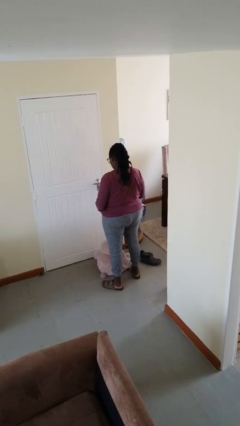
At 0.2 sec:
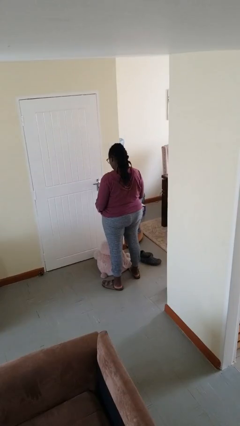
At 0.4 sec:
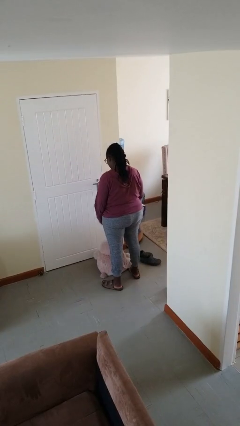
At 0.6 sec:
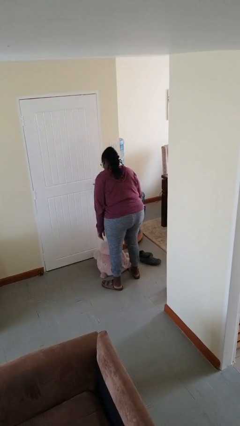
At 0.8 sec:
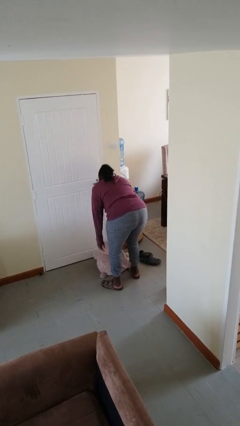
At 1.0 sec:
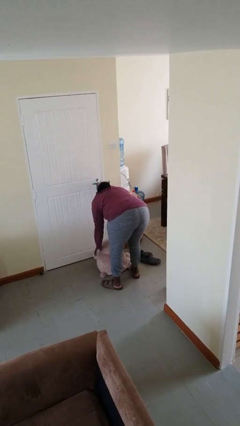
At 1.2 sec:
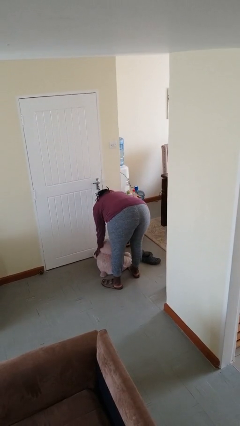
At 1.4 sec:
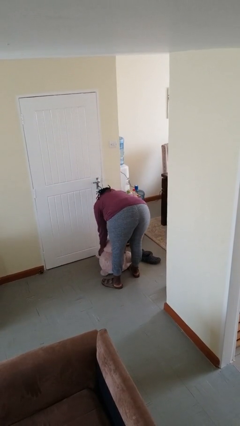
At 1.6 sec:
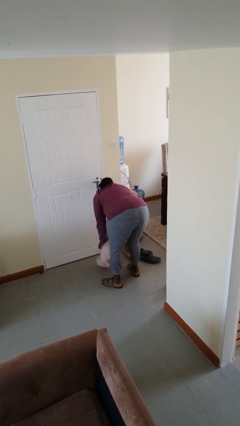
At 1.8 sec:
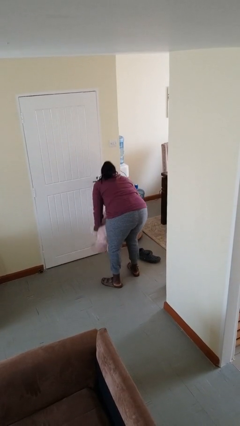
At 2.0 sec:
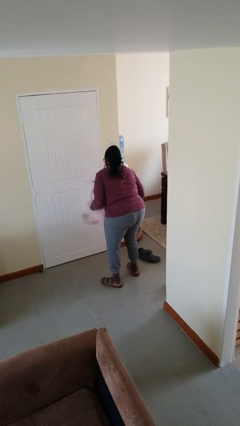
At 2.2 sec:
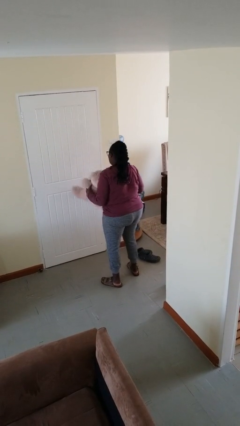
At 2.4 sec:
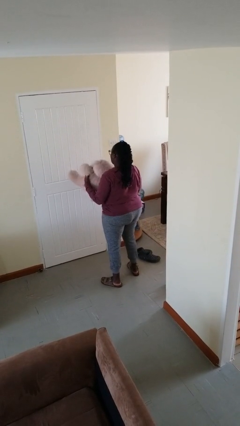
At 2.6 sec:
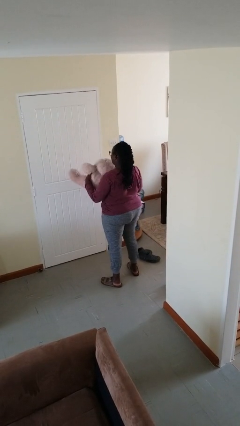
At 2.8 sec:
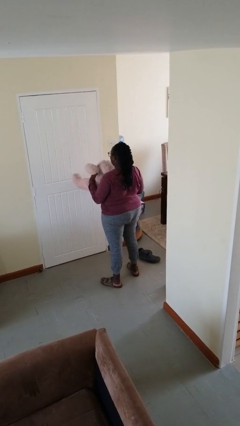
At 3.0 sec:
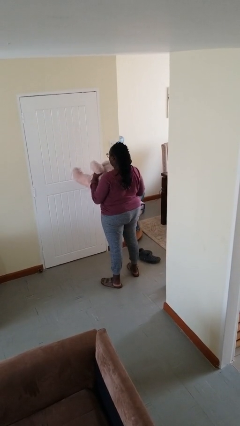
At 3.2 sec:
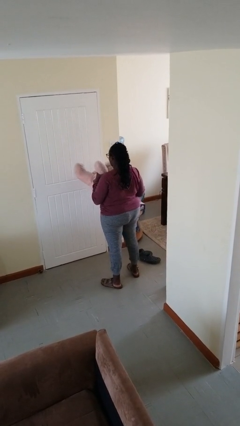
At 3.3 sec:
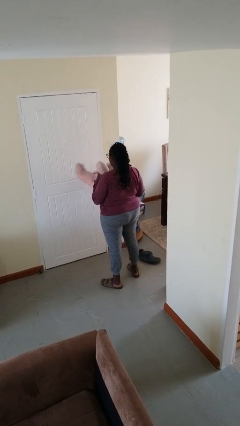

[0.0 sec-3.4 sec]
person picks up object from floor

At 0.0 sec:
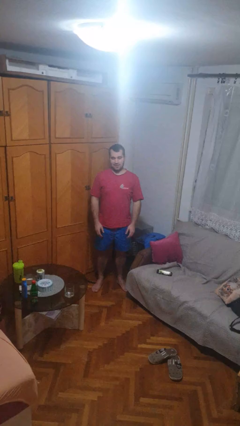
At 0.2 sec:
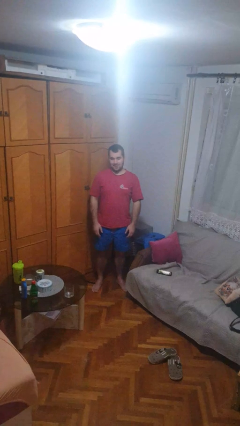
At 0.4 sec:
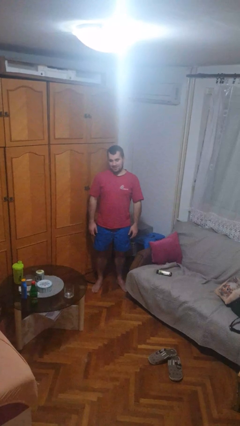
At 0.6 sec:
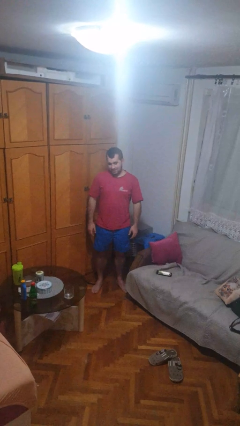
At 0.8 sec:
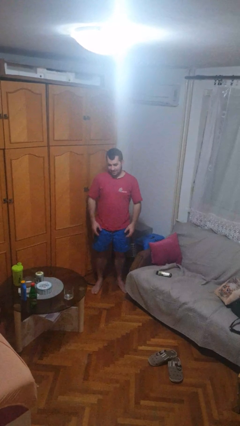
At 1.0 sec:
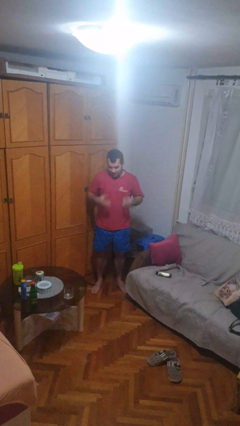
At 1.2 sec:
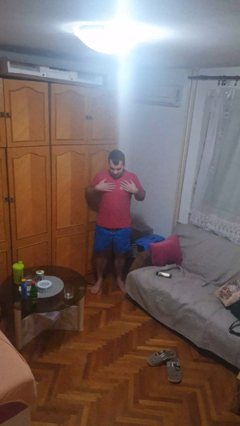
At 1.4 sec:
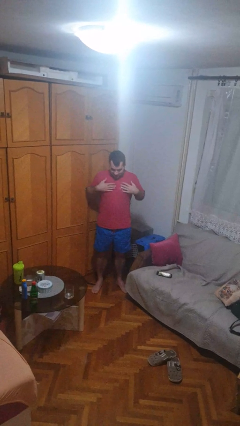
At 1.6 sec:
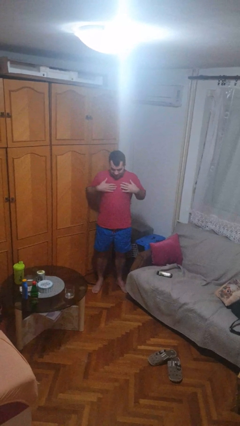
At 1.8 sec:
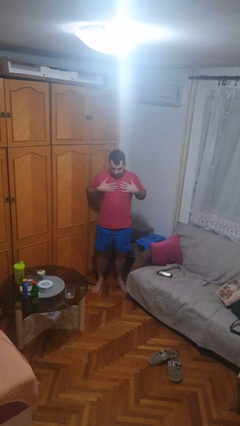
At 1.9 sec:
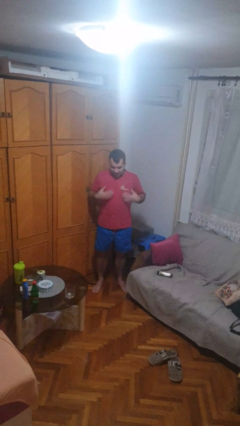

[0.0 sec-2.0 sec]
person drums on chest

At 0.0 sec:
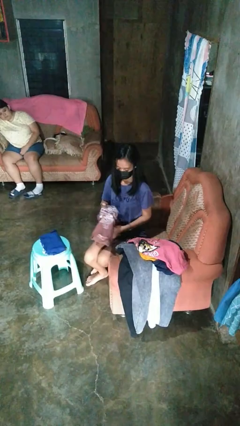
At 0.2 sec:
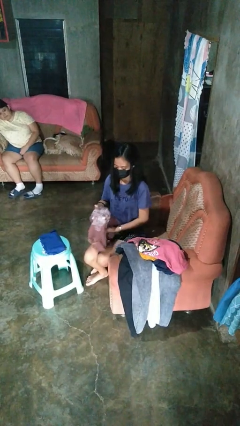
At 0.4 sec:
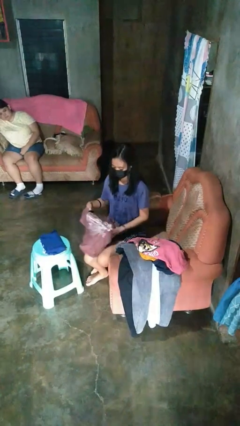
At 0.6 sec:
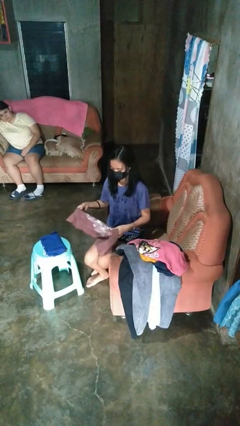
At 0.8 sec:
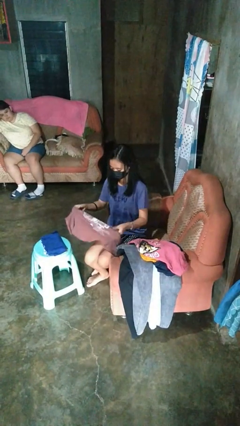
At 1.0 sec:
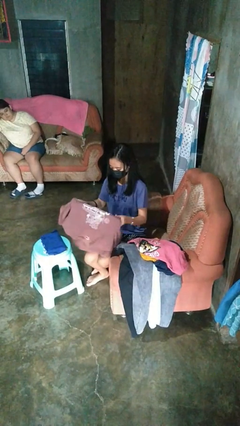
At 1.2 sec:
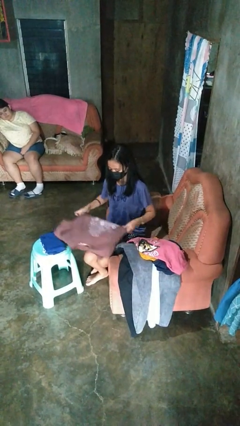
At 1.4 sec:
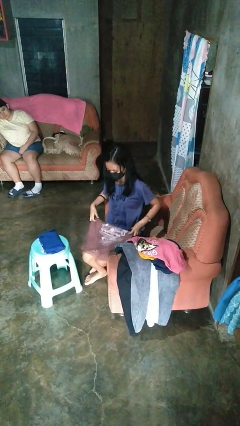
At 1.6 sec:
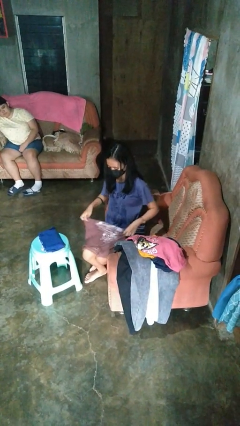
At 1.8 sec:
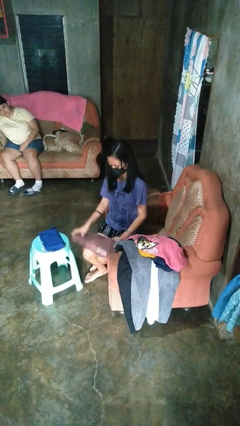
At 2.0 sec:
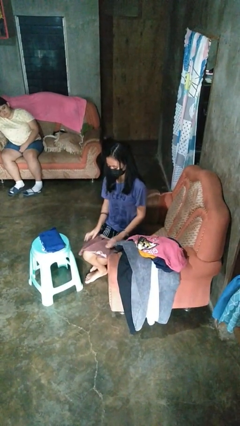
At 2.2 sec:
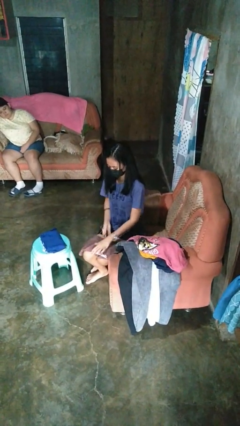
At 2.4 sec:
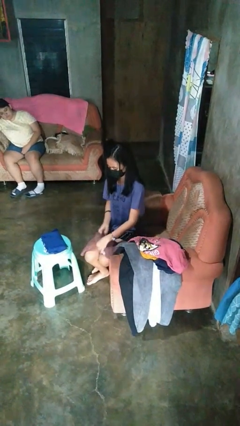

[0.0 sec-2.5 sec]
person folds shirt

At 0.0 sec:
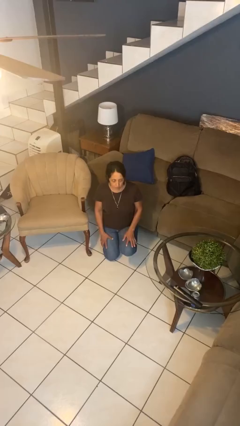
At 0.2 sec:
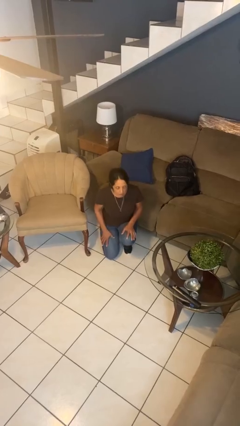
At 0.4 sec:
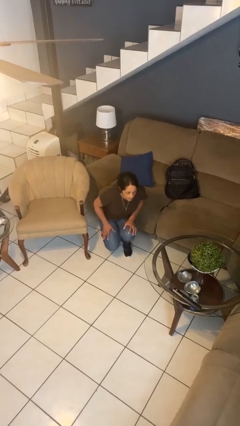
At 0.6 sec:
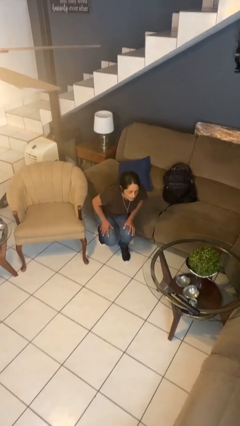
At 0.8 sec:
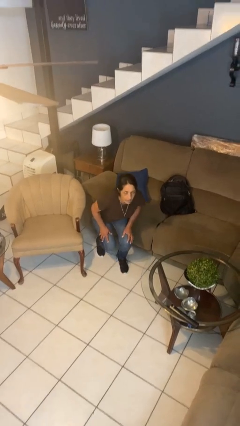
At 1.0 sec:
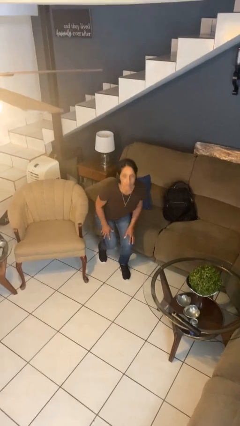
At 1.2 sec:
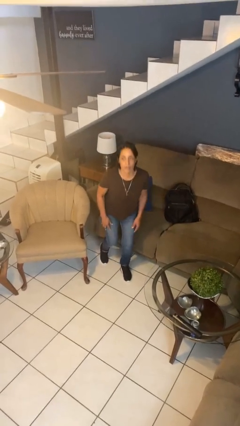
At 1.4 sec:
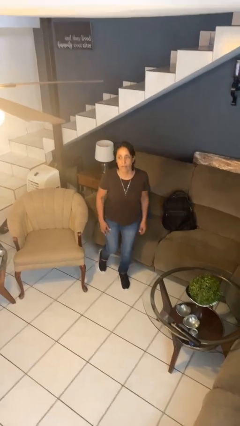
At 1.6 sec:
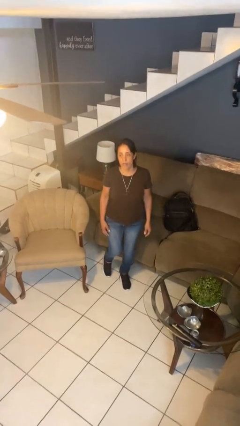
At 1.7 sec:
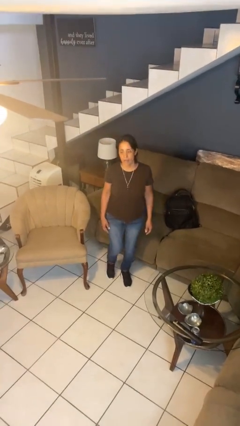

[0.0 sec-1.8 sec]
person stands up from floor

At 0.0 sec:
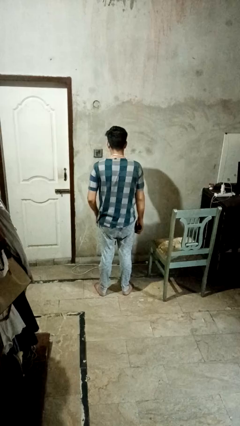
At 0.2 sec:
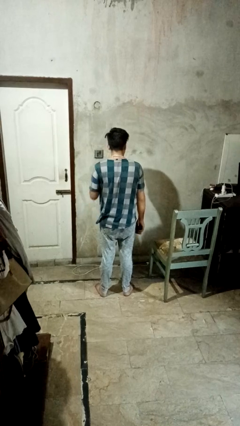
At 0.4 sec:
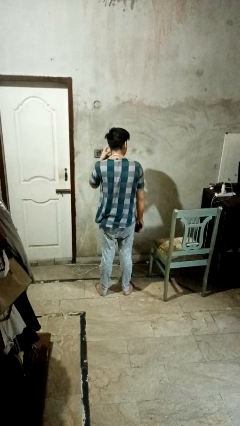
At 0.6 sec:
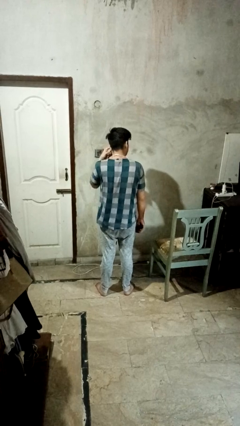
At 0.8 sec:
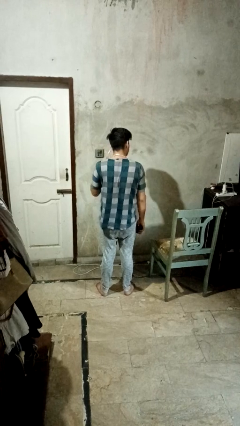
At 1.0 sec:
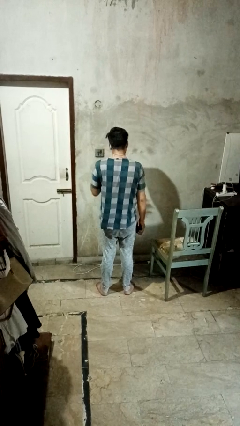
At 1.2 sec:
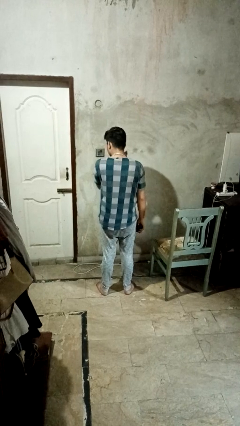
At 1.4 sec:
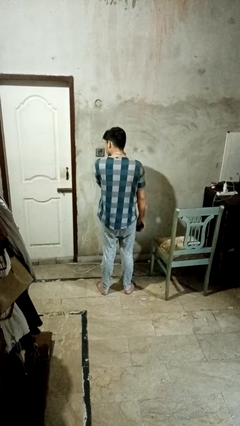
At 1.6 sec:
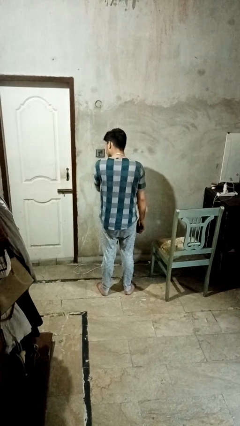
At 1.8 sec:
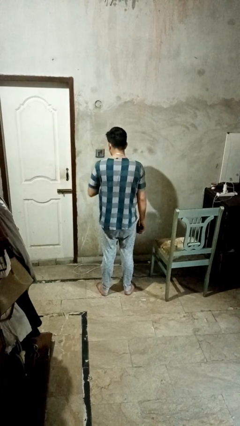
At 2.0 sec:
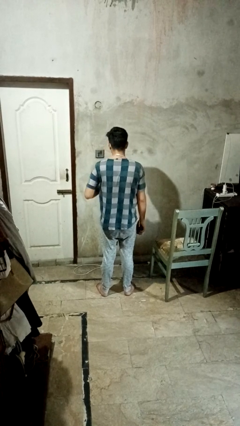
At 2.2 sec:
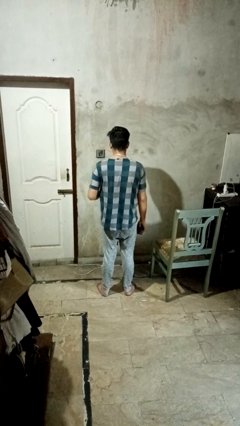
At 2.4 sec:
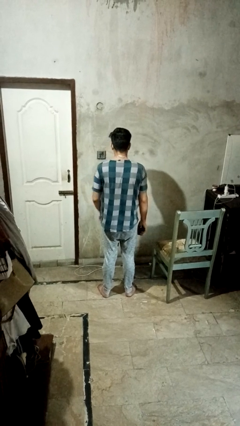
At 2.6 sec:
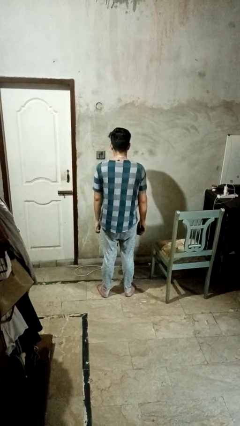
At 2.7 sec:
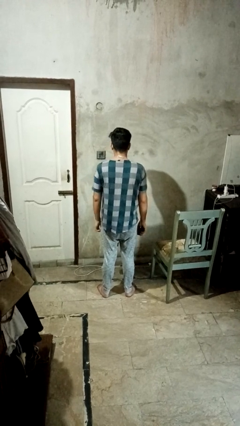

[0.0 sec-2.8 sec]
person takes off headphones

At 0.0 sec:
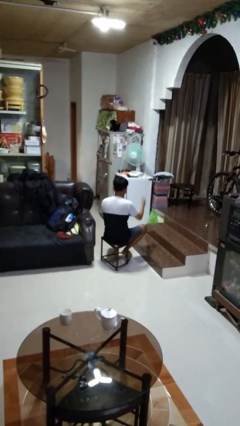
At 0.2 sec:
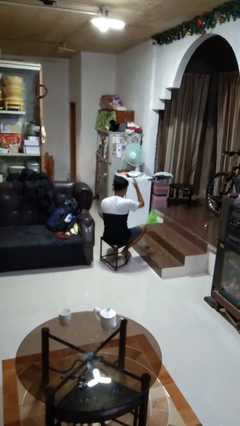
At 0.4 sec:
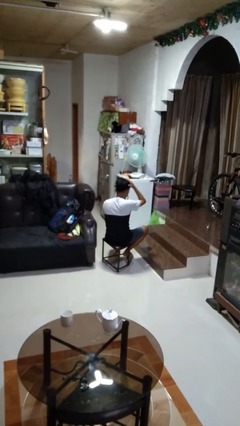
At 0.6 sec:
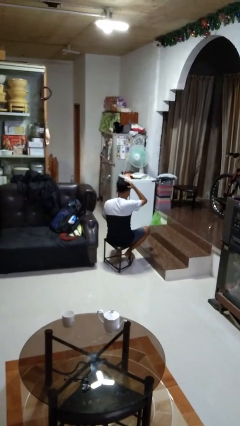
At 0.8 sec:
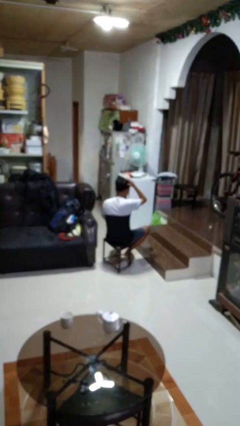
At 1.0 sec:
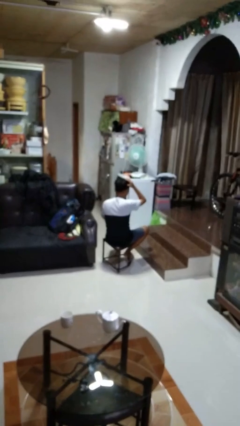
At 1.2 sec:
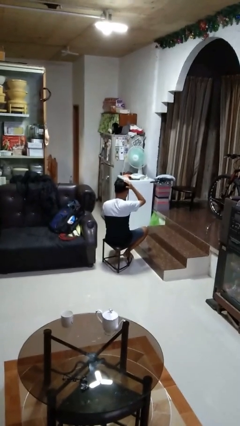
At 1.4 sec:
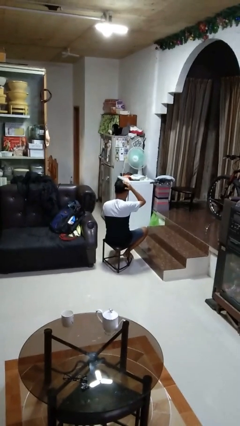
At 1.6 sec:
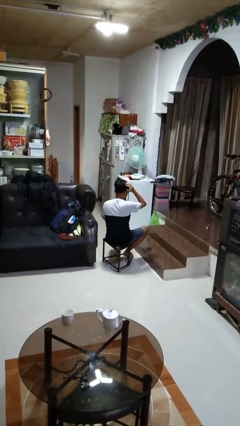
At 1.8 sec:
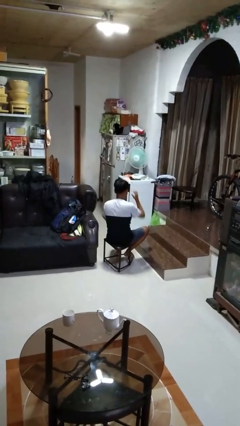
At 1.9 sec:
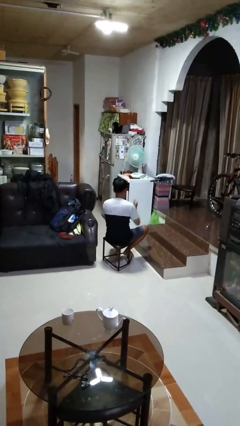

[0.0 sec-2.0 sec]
person pats head

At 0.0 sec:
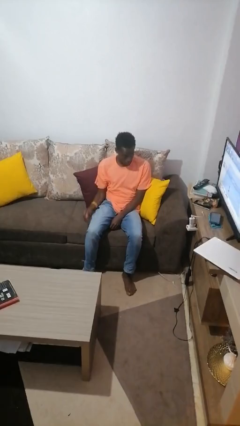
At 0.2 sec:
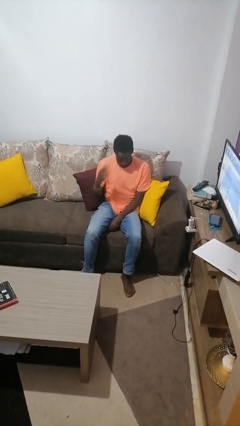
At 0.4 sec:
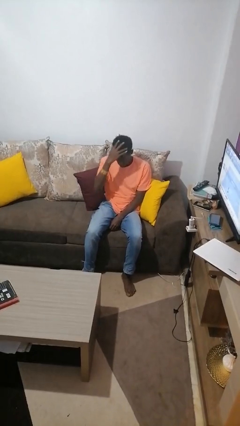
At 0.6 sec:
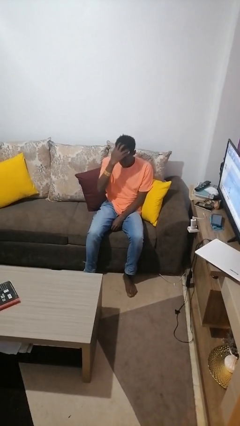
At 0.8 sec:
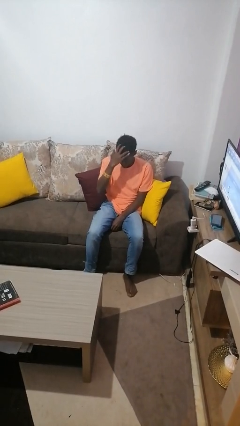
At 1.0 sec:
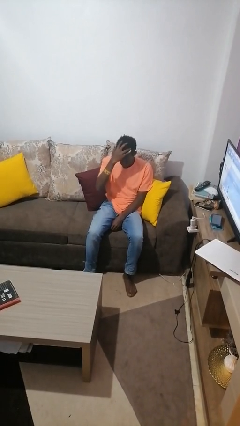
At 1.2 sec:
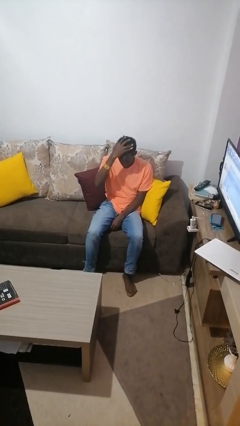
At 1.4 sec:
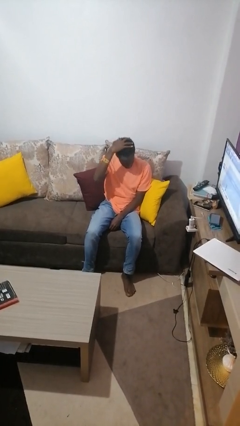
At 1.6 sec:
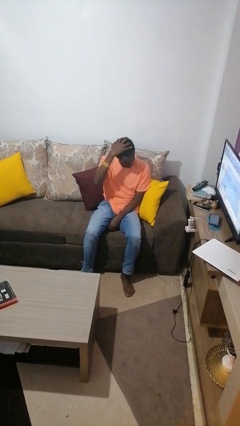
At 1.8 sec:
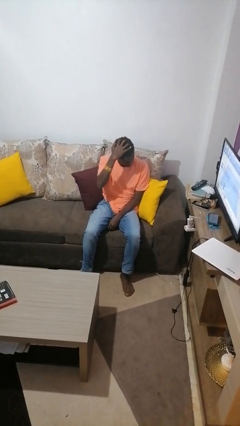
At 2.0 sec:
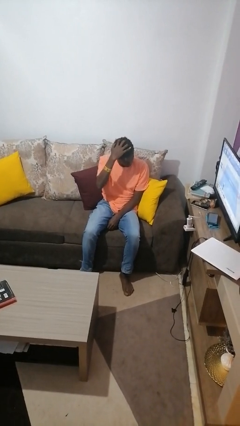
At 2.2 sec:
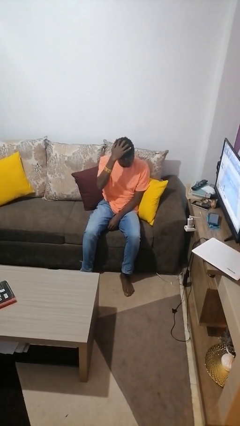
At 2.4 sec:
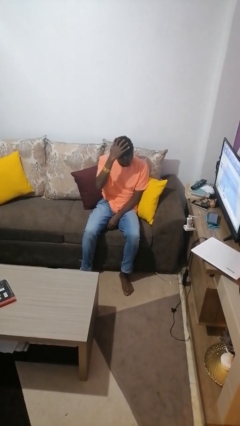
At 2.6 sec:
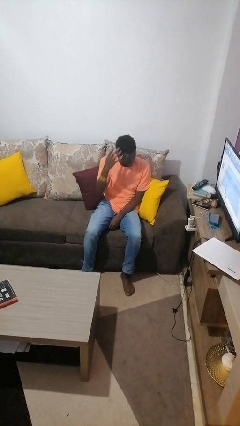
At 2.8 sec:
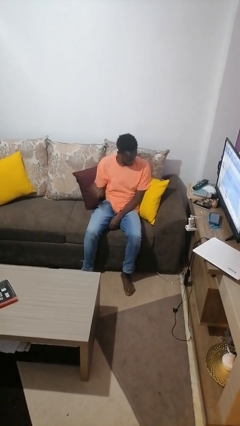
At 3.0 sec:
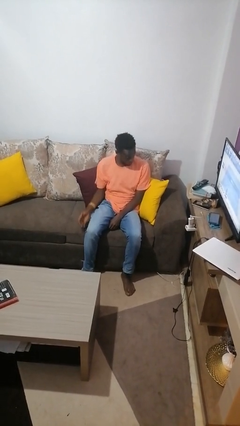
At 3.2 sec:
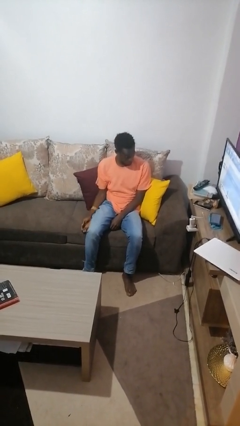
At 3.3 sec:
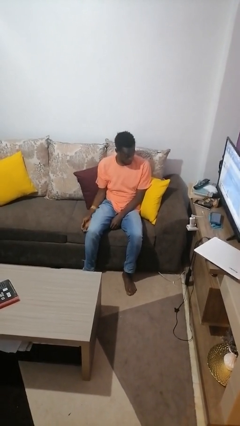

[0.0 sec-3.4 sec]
person strokes hair
